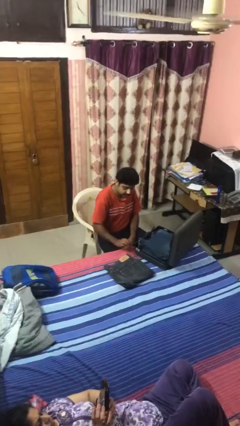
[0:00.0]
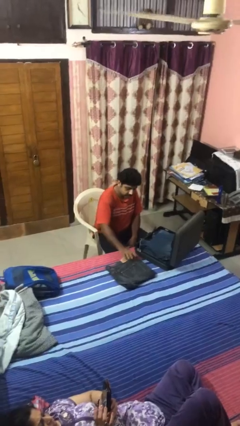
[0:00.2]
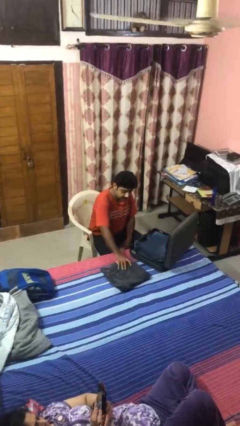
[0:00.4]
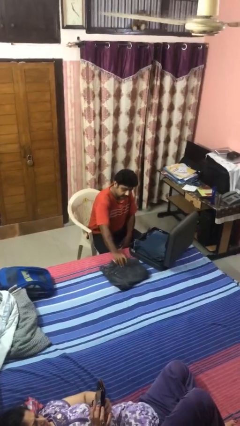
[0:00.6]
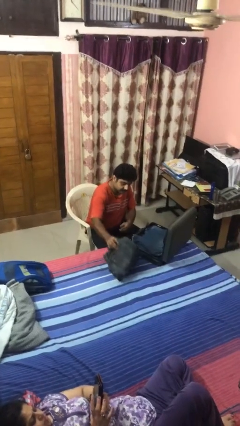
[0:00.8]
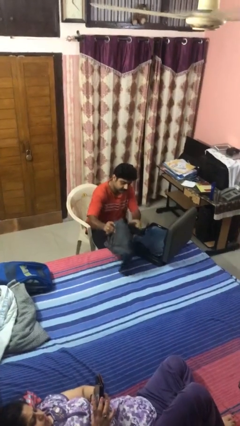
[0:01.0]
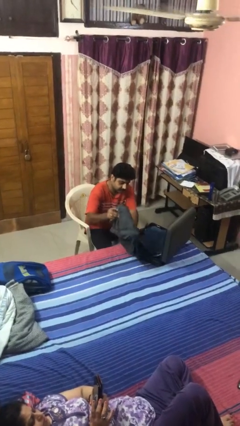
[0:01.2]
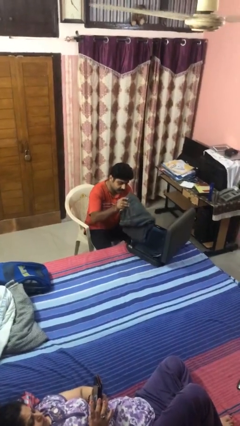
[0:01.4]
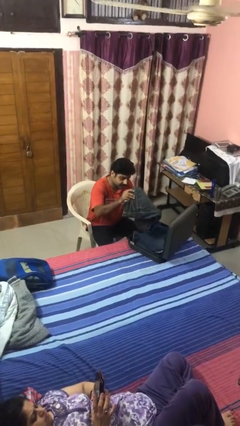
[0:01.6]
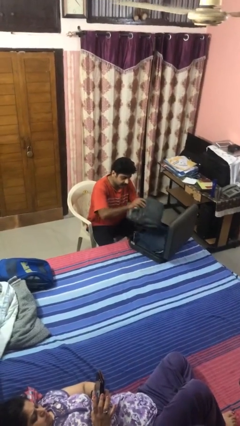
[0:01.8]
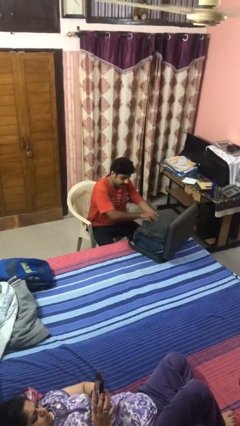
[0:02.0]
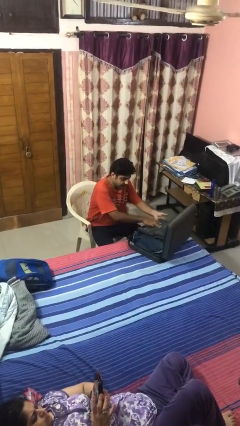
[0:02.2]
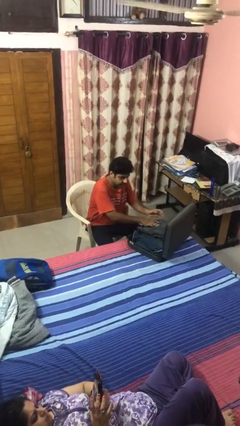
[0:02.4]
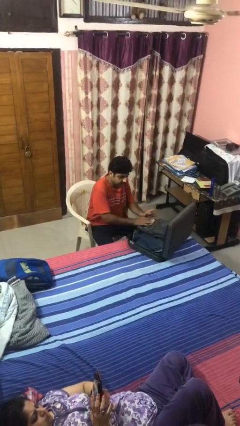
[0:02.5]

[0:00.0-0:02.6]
person loads clothes into suitcase

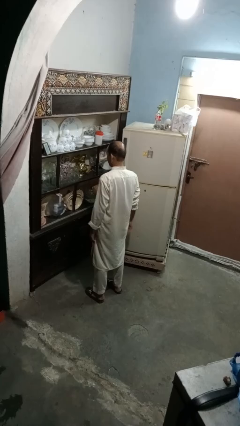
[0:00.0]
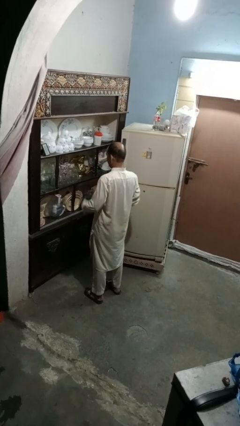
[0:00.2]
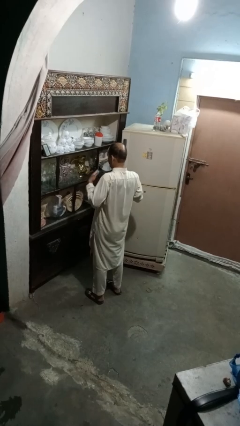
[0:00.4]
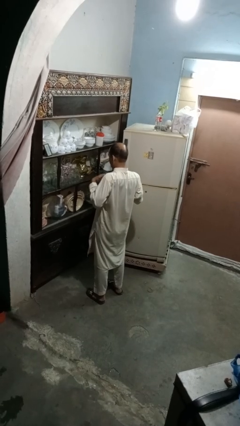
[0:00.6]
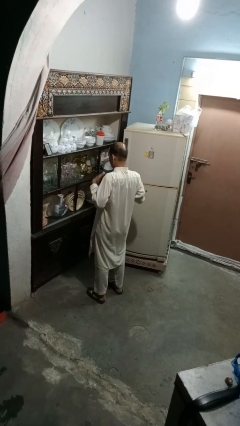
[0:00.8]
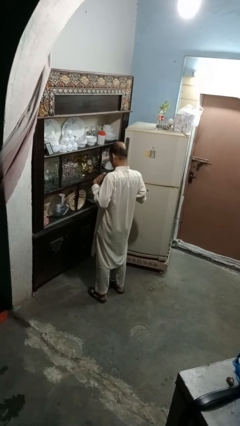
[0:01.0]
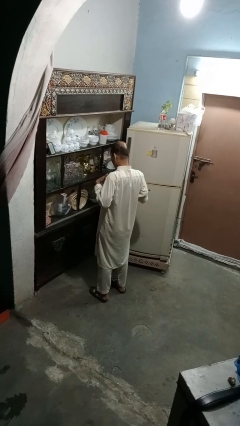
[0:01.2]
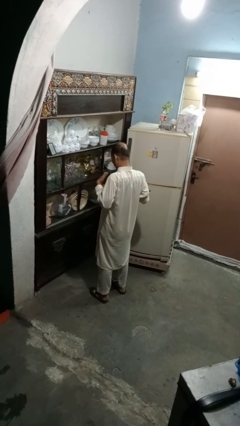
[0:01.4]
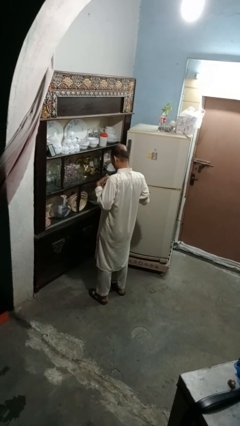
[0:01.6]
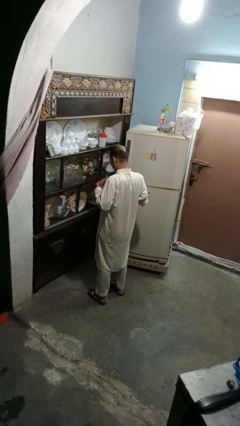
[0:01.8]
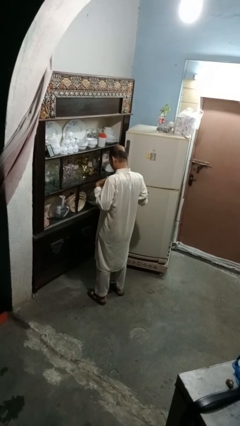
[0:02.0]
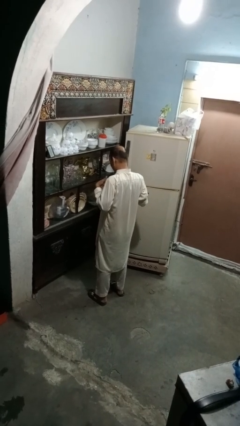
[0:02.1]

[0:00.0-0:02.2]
person drums on chest

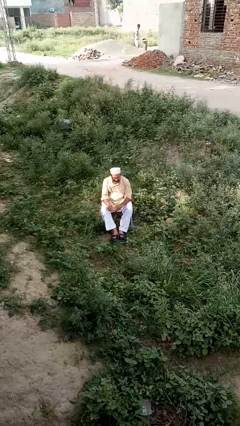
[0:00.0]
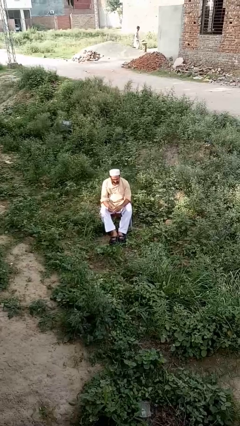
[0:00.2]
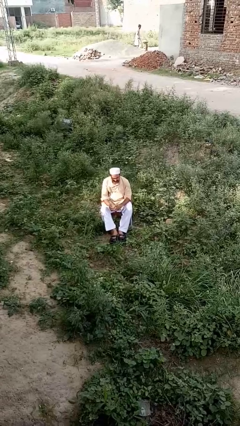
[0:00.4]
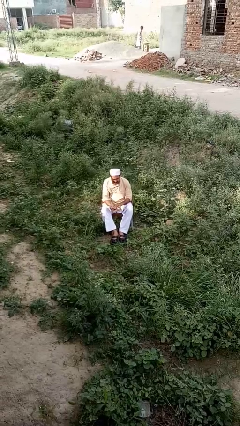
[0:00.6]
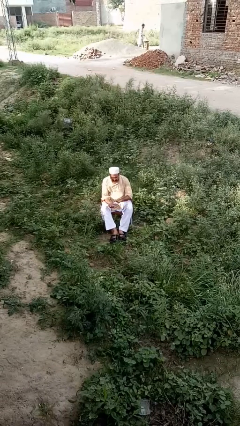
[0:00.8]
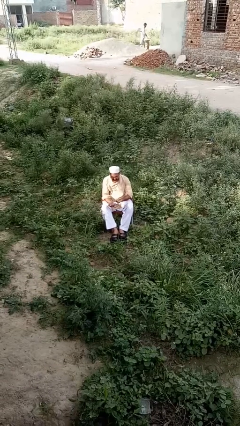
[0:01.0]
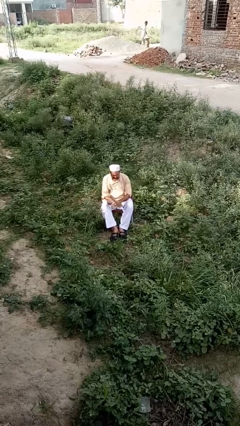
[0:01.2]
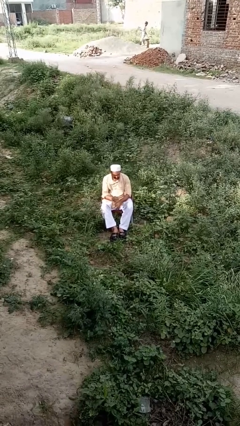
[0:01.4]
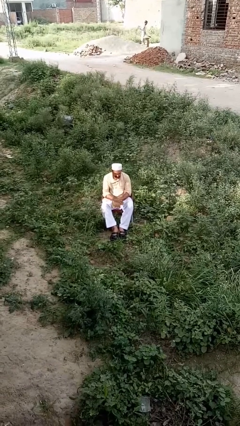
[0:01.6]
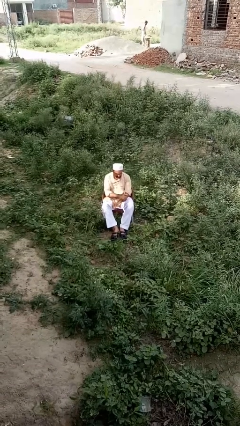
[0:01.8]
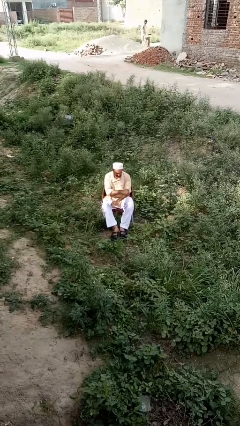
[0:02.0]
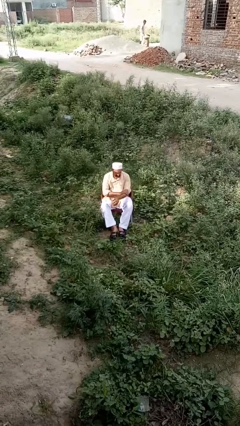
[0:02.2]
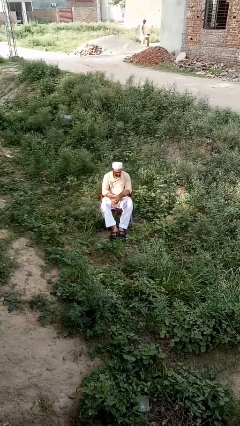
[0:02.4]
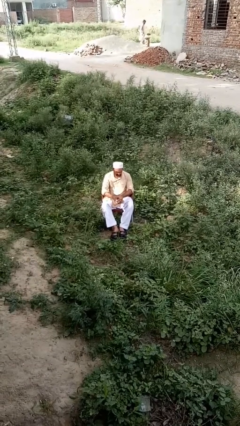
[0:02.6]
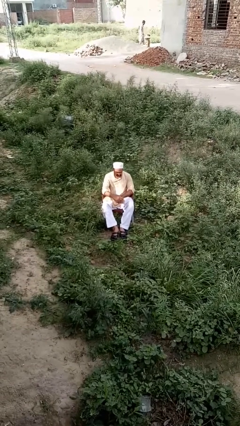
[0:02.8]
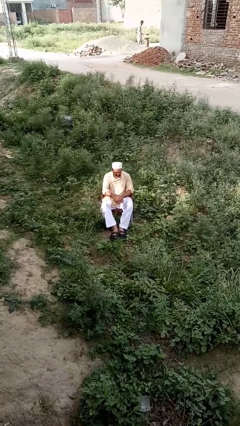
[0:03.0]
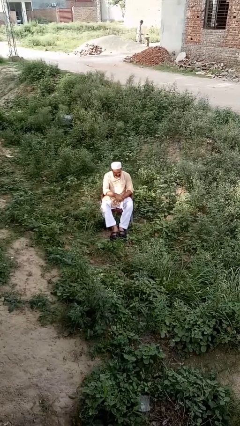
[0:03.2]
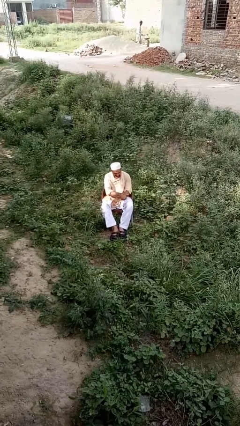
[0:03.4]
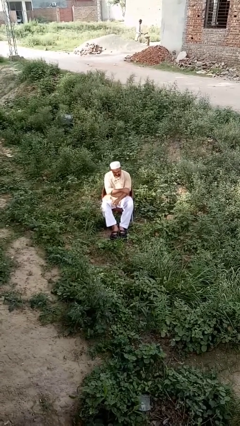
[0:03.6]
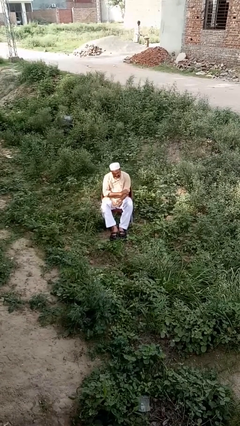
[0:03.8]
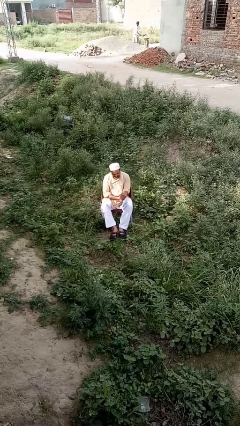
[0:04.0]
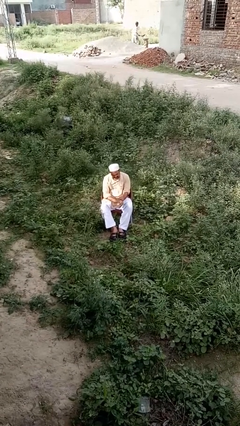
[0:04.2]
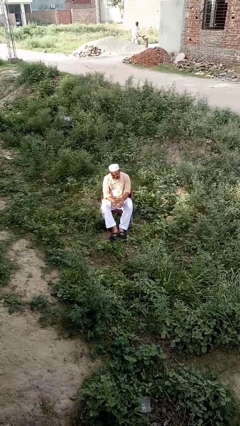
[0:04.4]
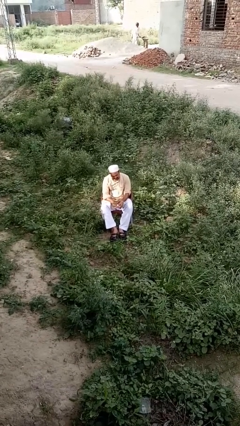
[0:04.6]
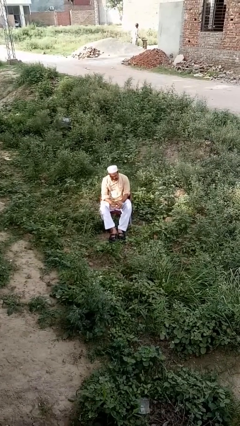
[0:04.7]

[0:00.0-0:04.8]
person applies sunscreen

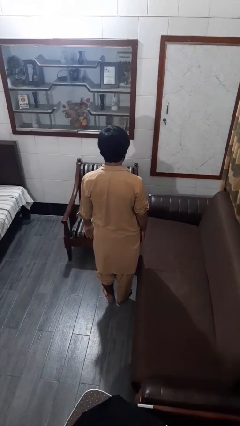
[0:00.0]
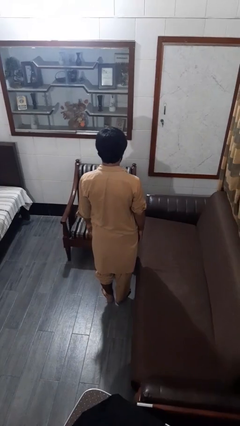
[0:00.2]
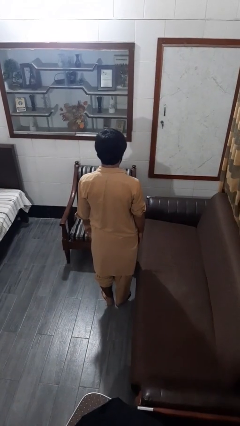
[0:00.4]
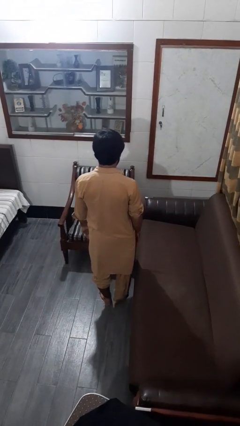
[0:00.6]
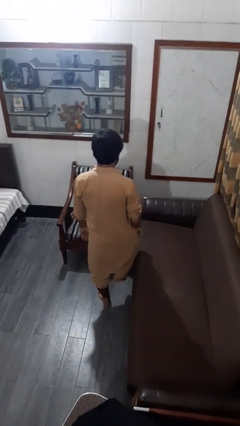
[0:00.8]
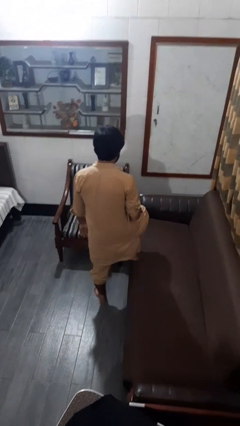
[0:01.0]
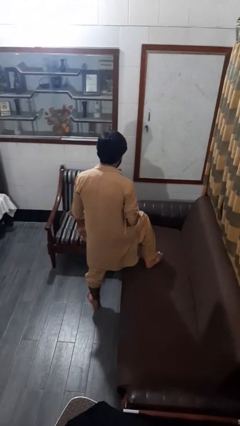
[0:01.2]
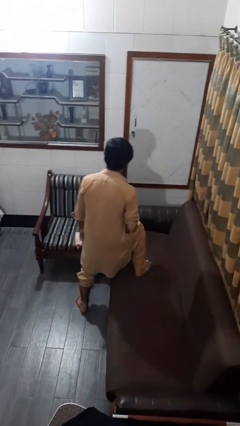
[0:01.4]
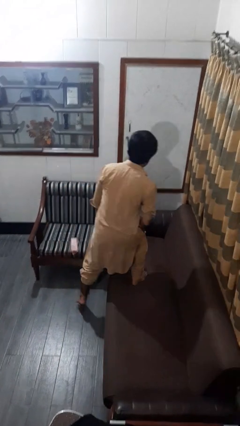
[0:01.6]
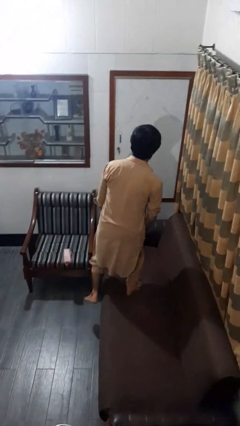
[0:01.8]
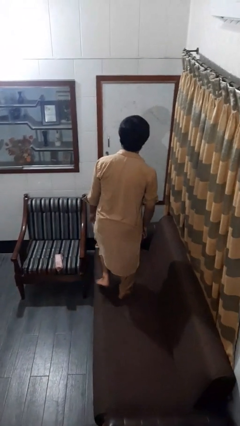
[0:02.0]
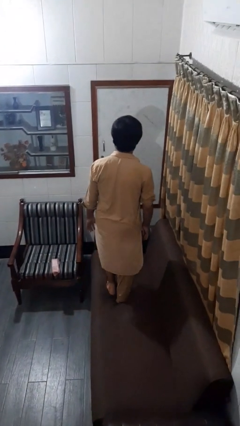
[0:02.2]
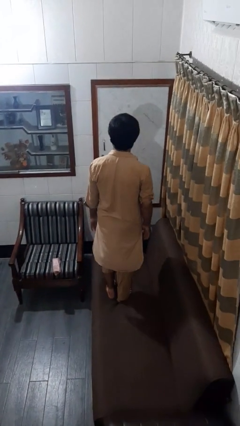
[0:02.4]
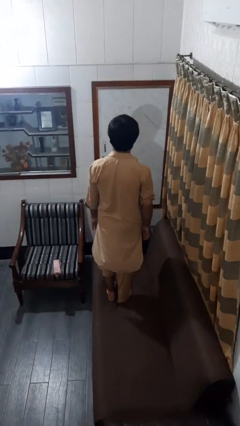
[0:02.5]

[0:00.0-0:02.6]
person climbs on couch

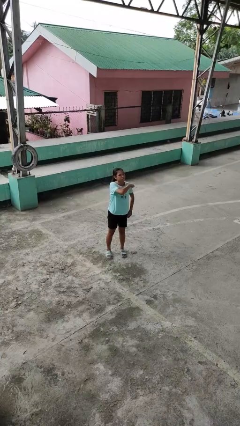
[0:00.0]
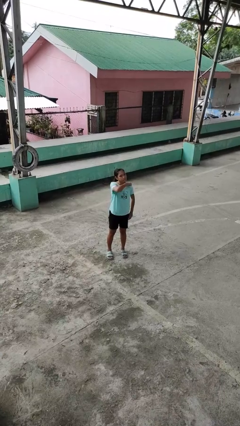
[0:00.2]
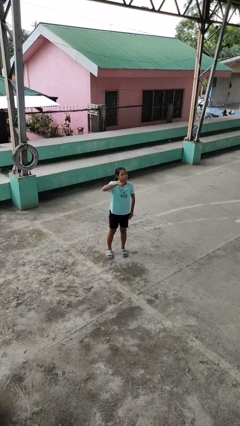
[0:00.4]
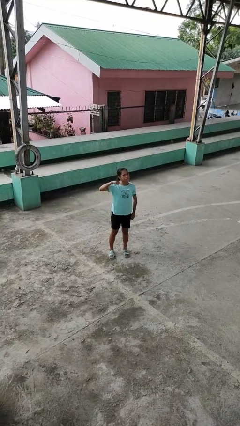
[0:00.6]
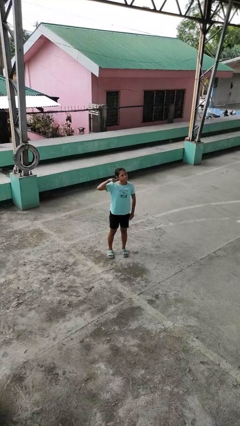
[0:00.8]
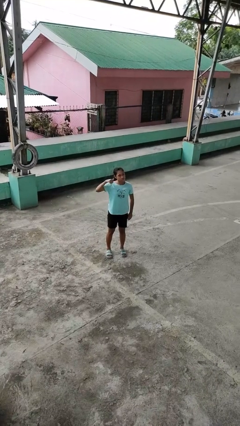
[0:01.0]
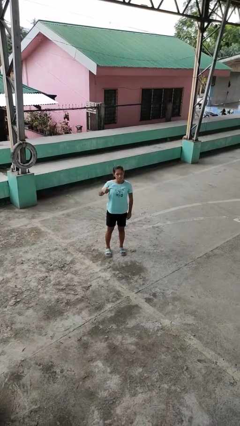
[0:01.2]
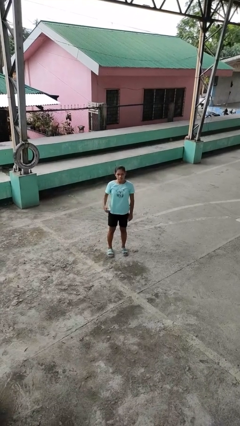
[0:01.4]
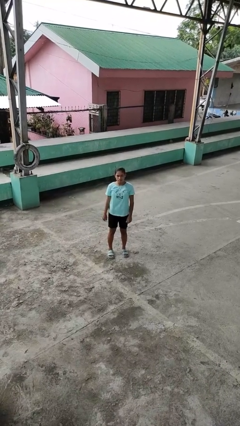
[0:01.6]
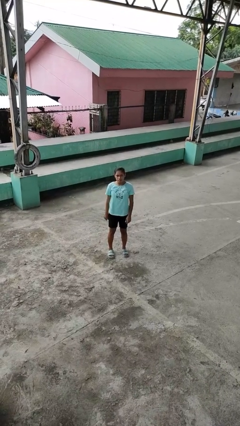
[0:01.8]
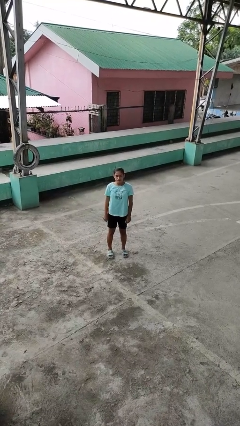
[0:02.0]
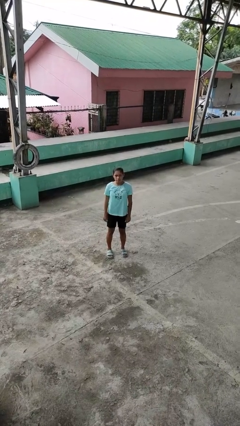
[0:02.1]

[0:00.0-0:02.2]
person gestures cut

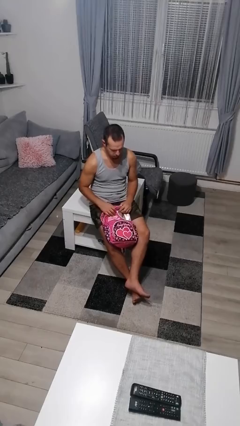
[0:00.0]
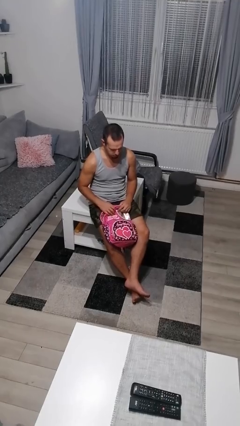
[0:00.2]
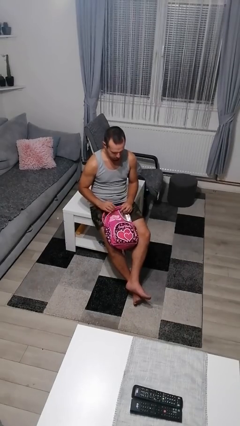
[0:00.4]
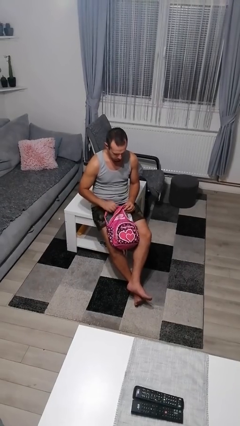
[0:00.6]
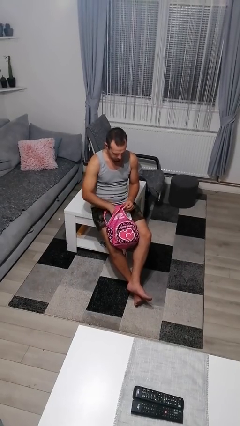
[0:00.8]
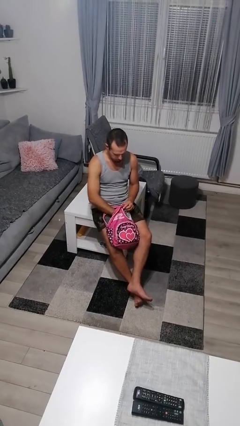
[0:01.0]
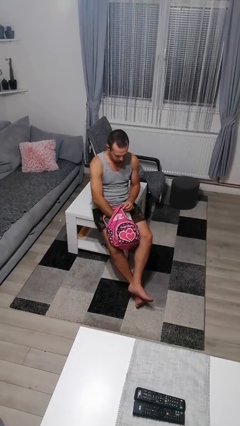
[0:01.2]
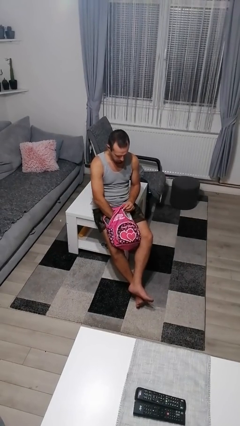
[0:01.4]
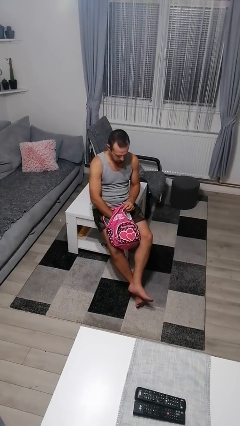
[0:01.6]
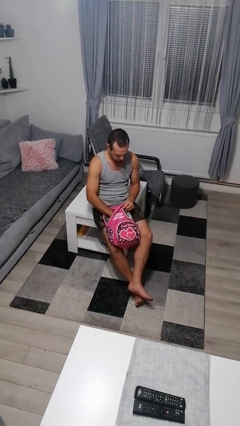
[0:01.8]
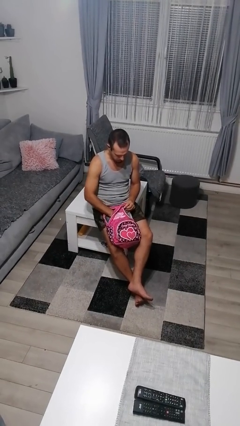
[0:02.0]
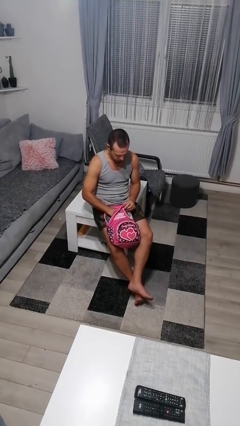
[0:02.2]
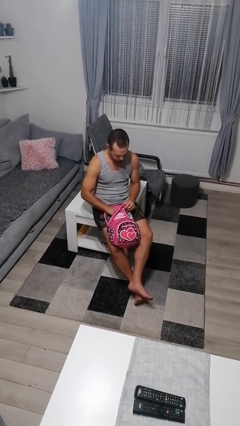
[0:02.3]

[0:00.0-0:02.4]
person searches in backpack

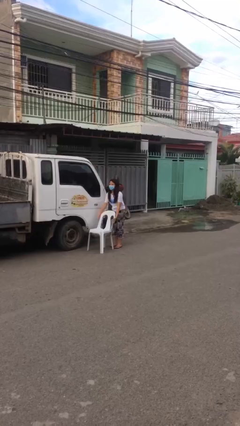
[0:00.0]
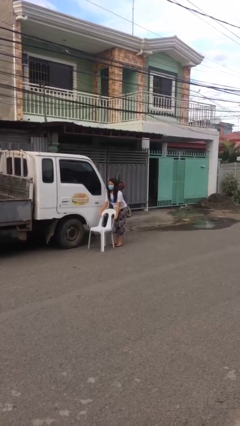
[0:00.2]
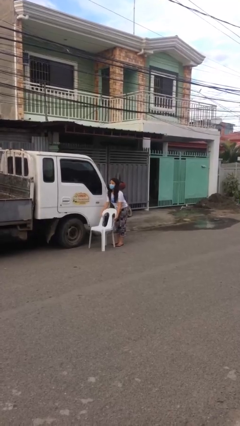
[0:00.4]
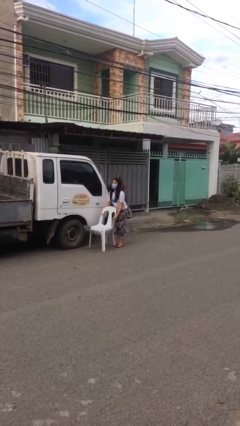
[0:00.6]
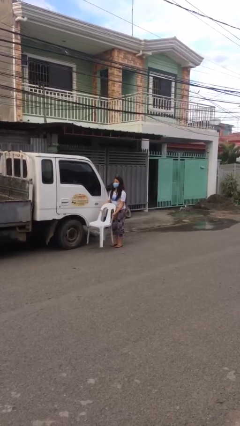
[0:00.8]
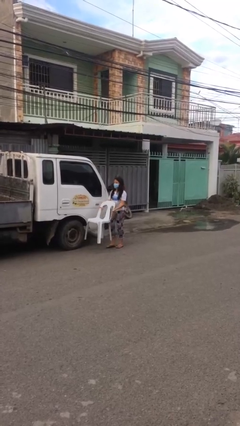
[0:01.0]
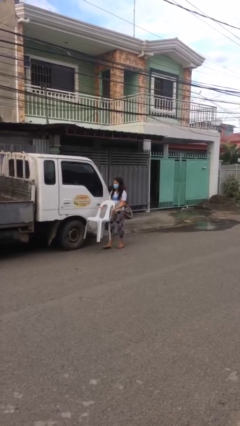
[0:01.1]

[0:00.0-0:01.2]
person picks up object from floor
